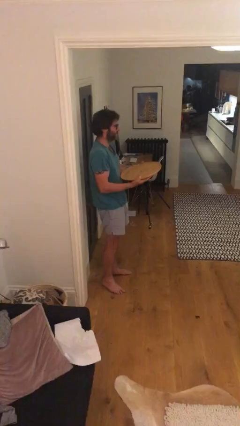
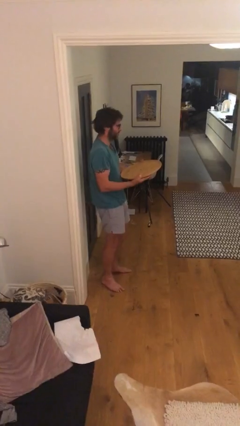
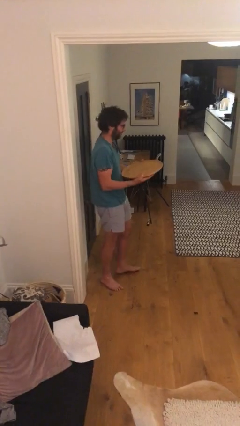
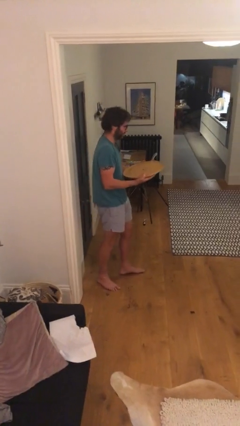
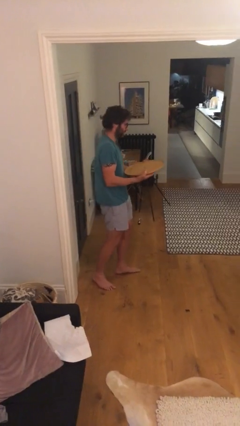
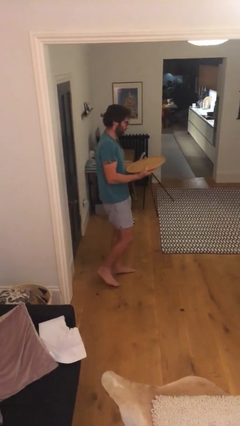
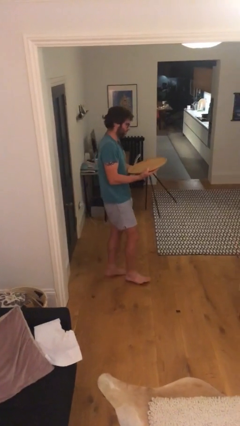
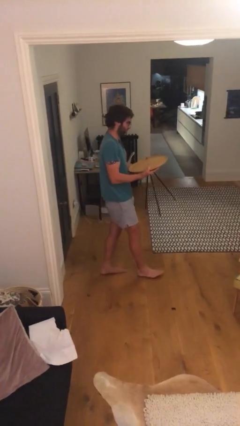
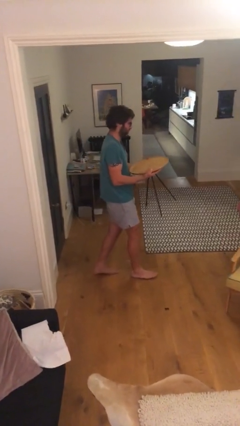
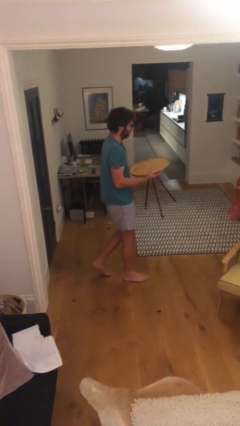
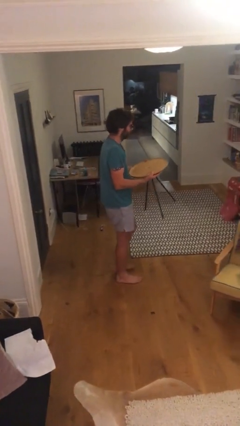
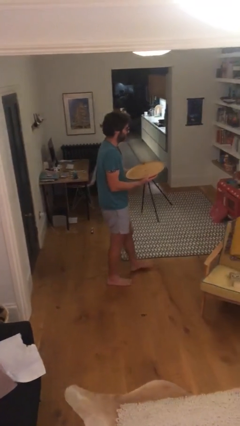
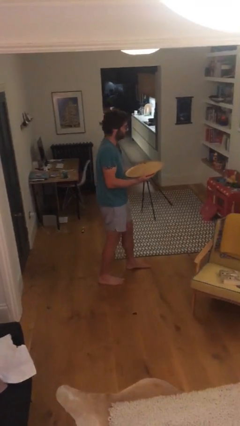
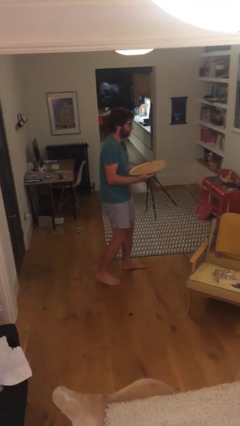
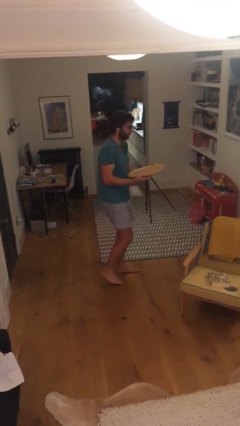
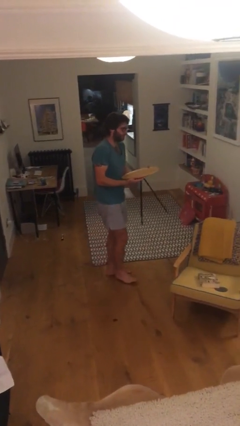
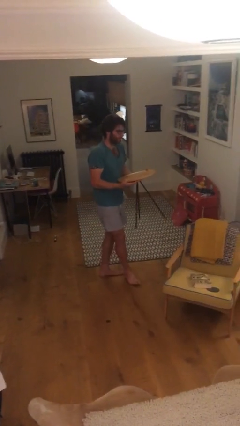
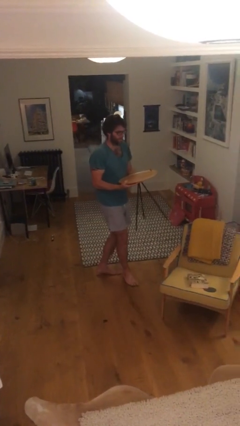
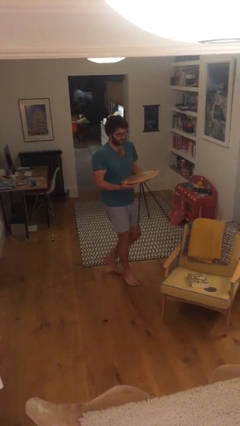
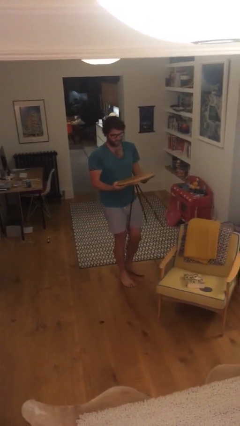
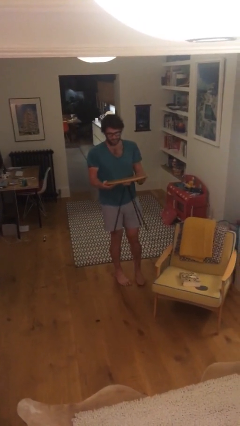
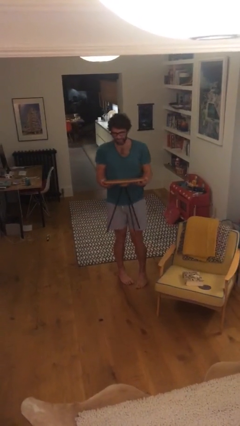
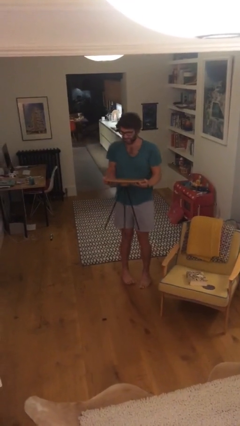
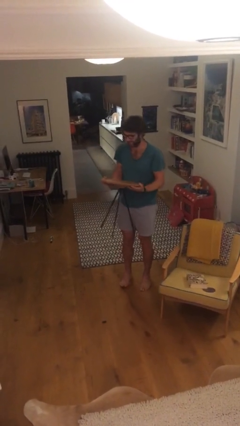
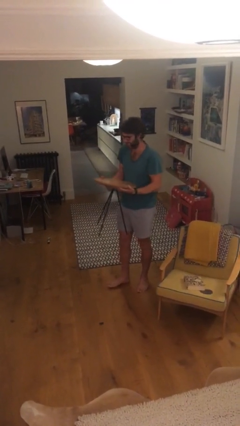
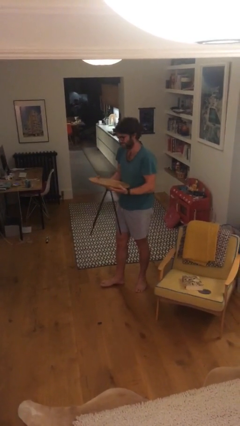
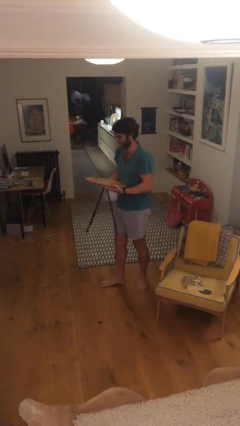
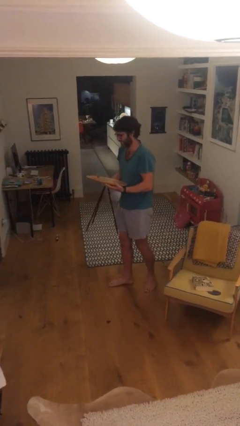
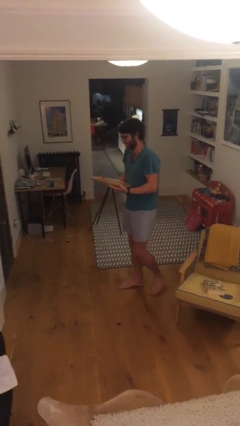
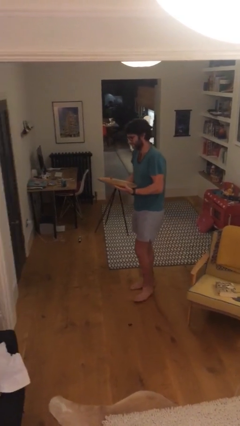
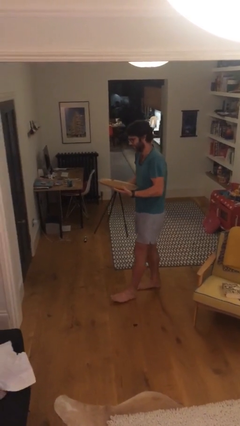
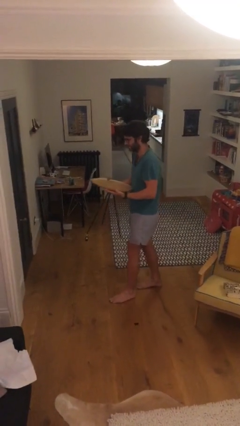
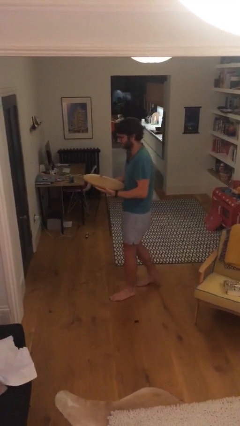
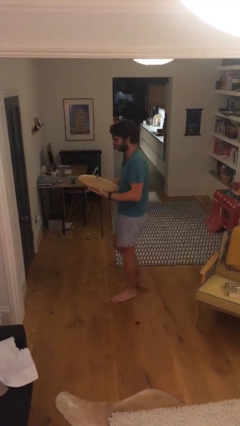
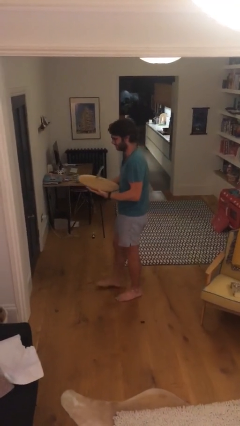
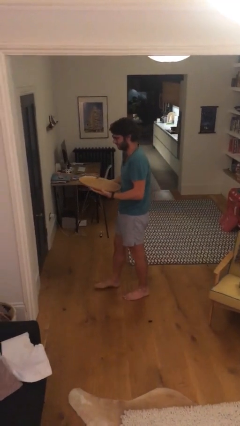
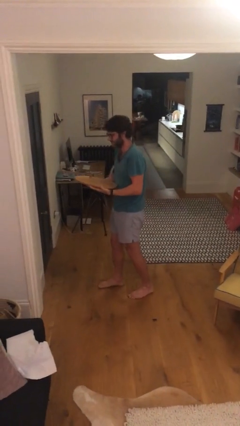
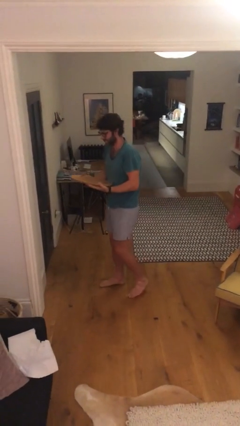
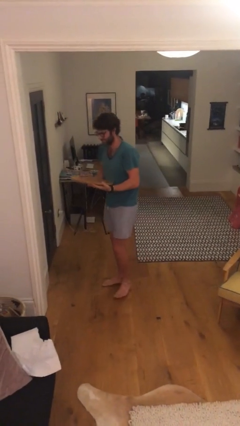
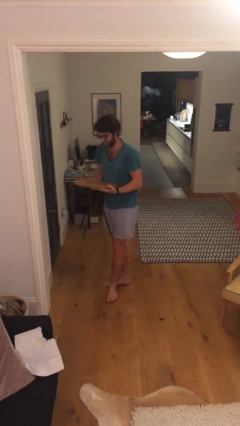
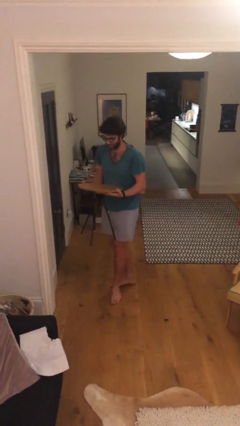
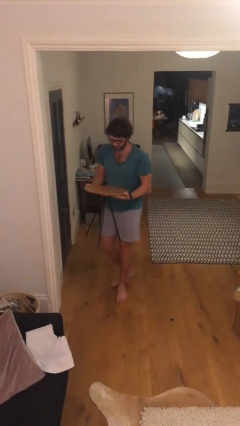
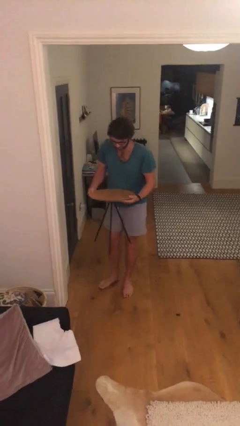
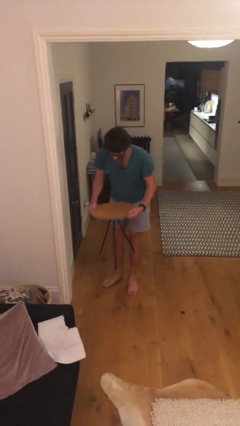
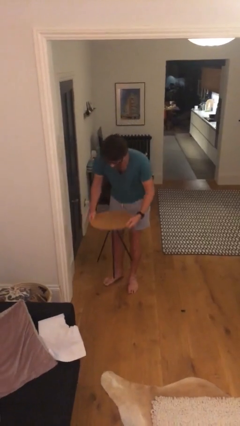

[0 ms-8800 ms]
person carries heavy object

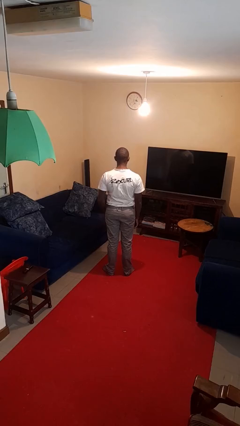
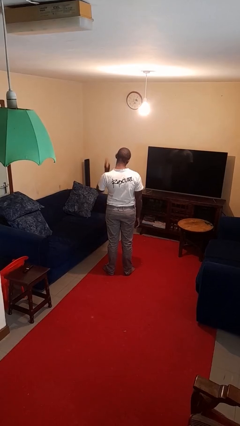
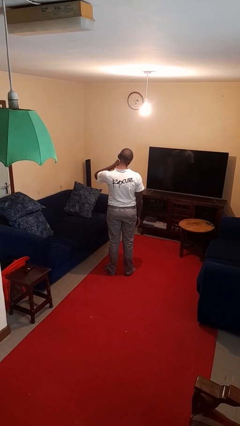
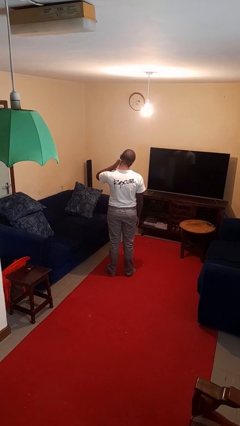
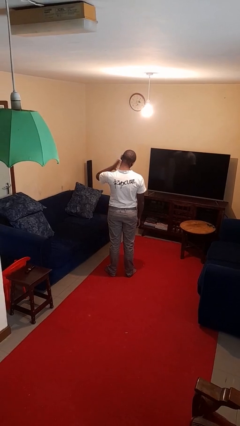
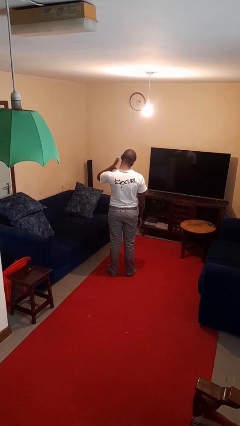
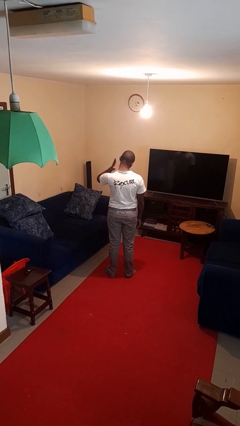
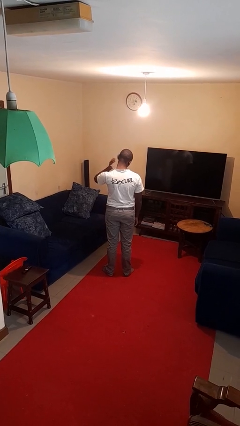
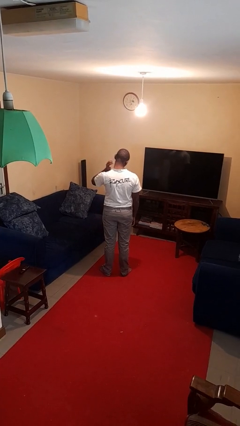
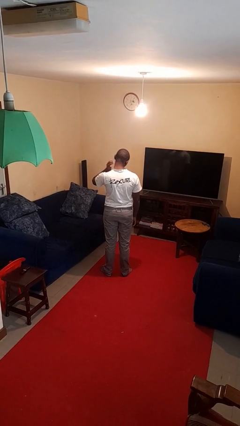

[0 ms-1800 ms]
person swats bug

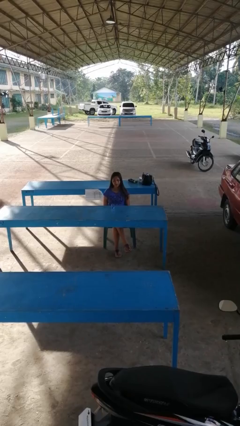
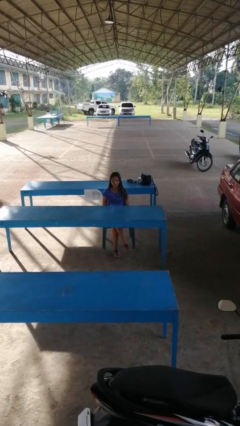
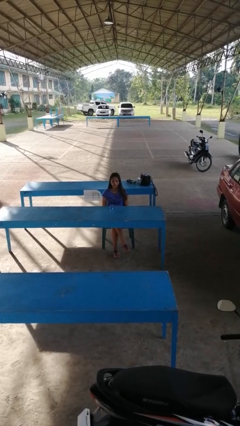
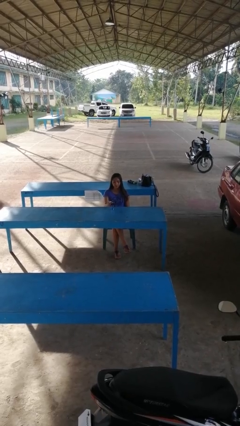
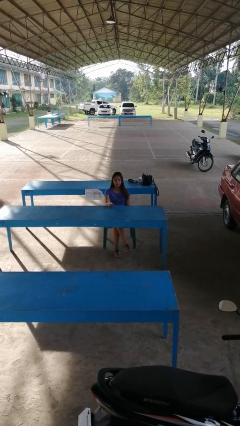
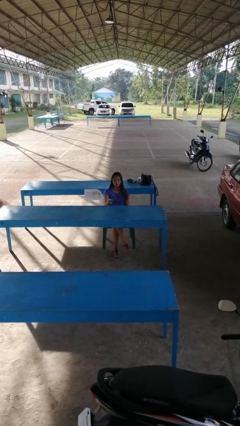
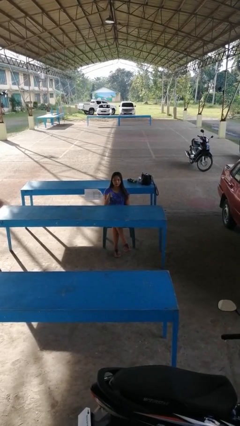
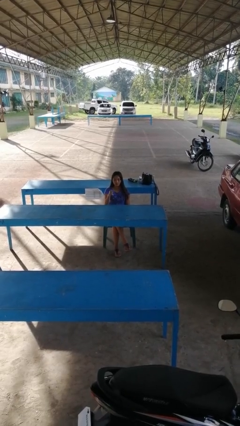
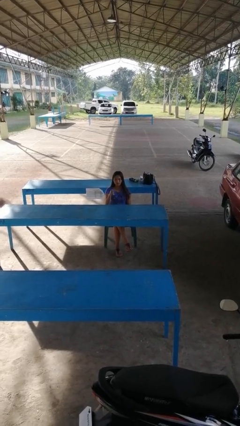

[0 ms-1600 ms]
person picks up object from table

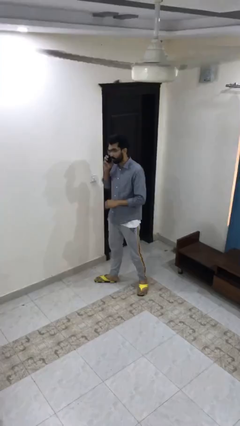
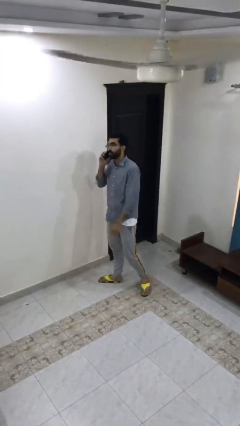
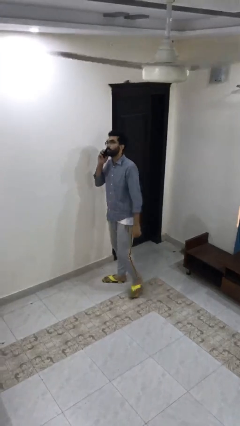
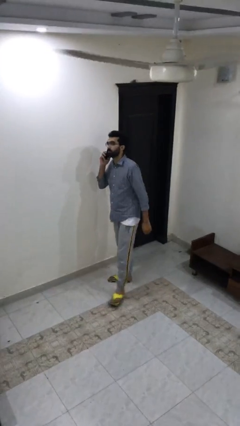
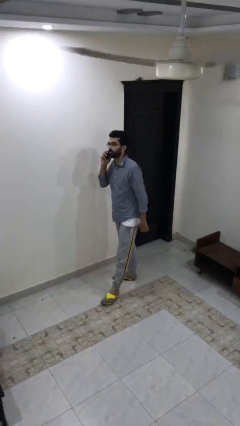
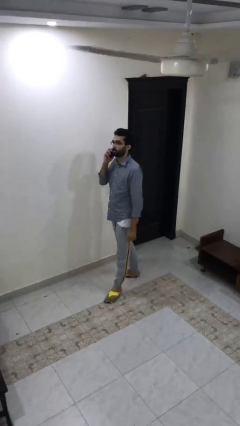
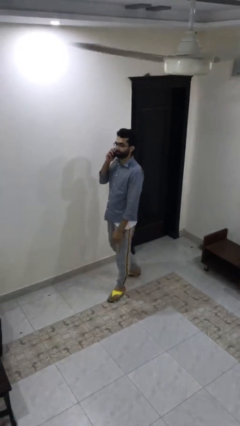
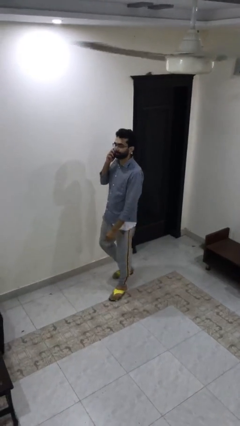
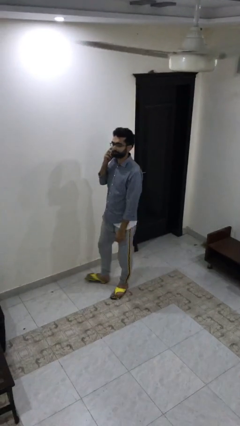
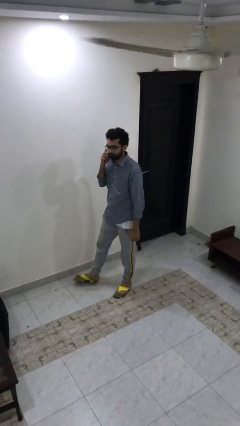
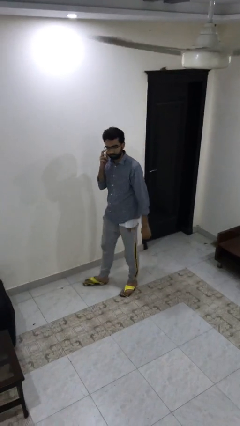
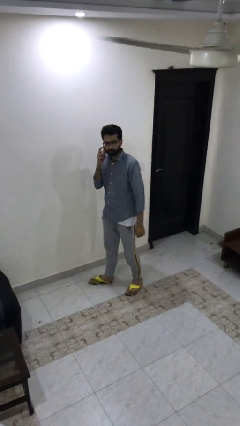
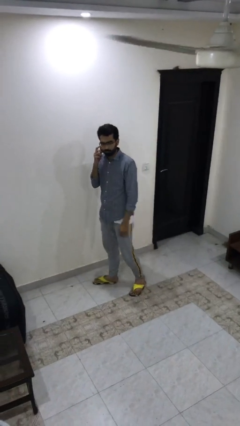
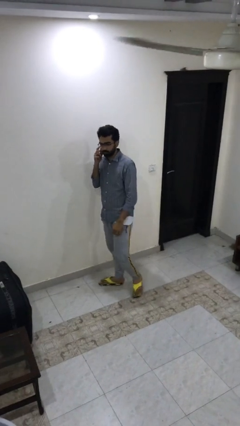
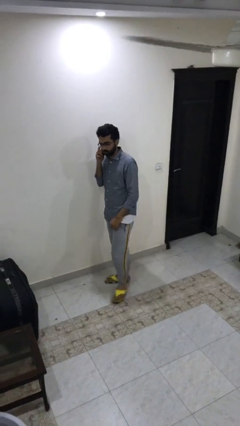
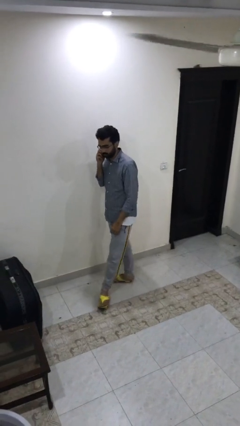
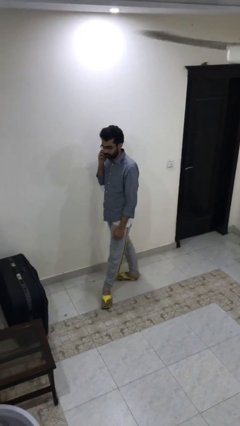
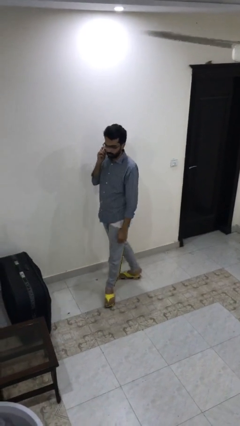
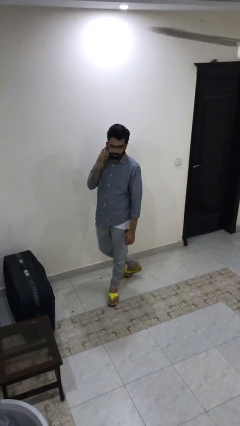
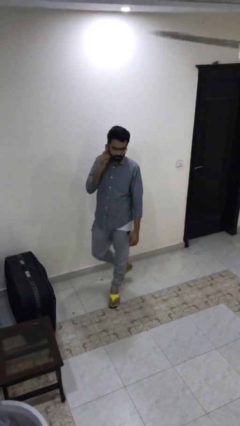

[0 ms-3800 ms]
person talks on phone

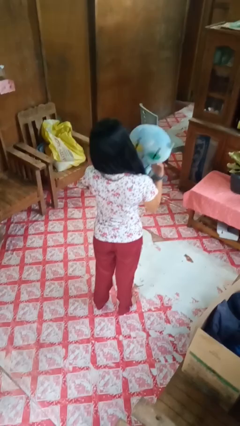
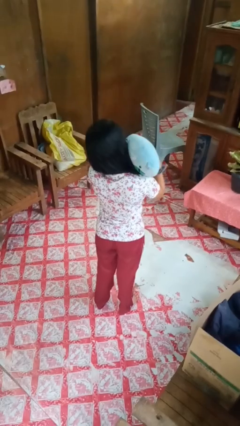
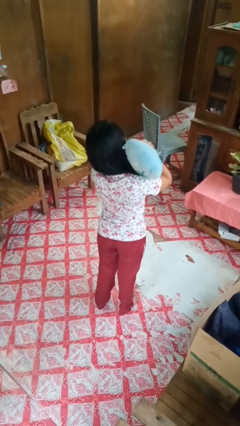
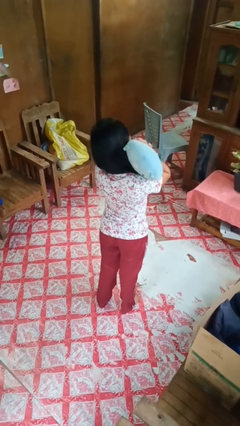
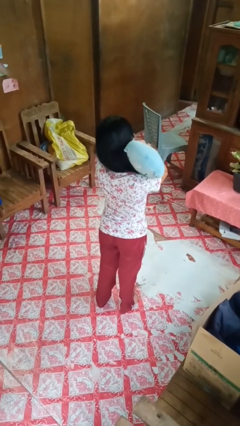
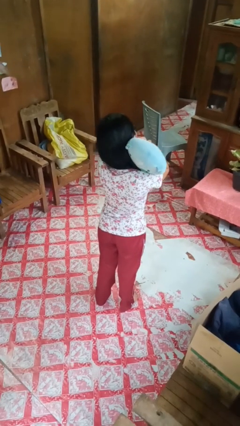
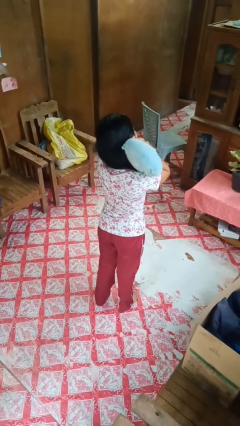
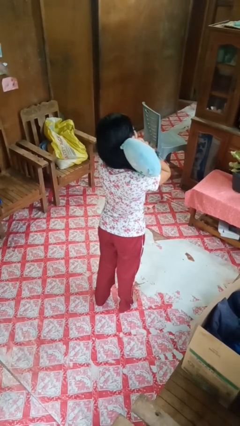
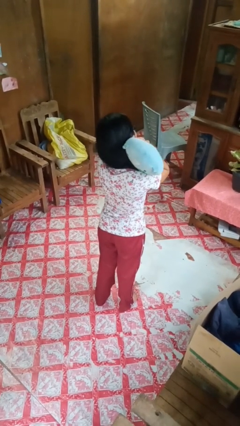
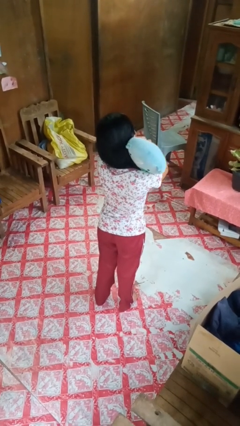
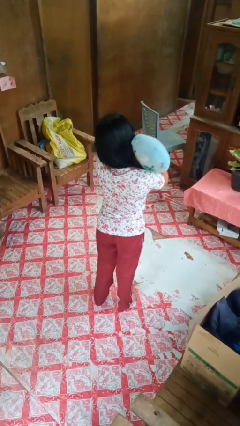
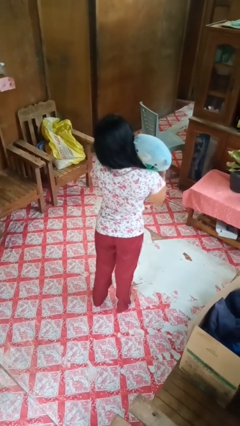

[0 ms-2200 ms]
person hugs stuffed animal
